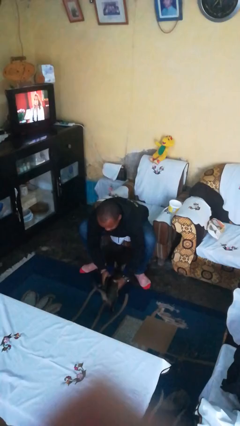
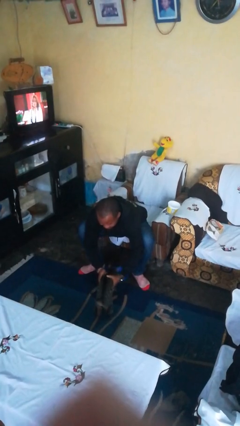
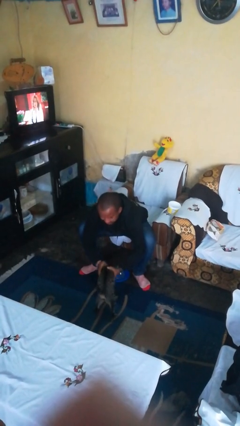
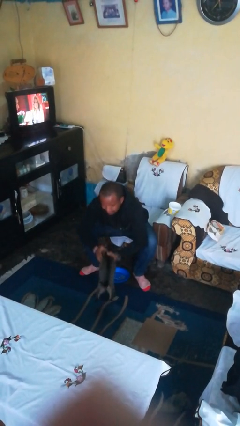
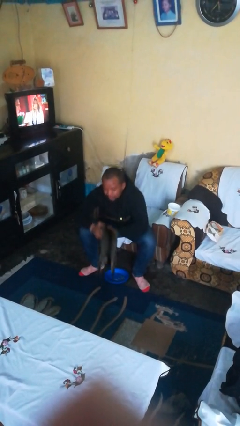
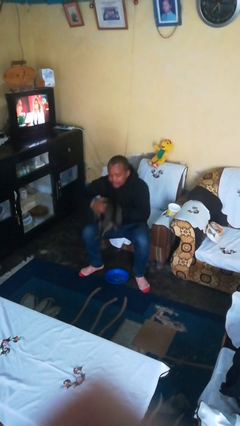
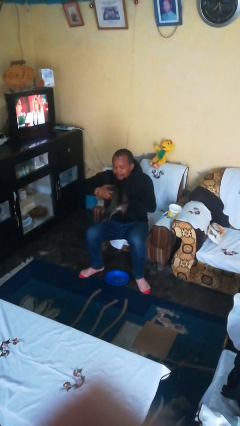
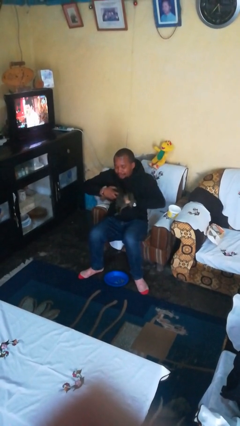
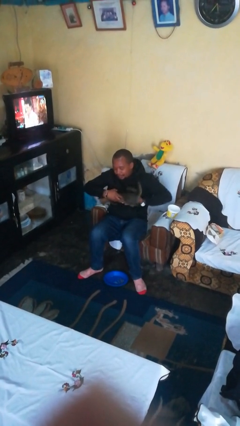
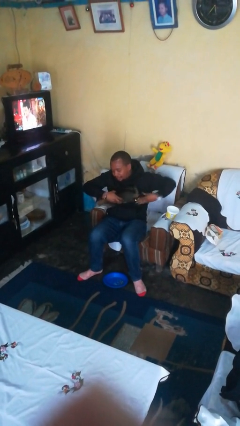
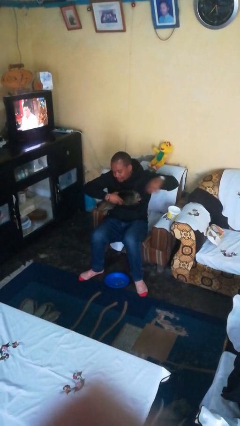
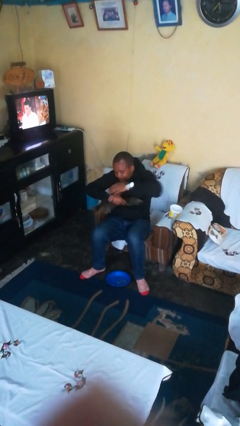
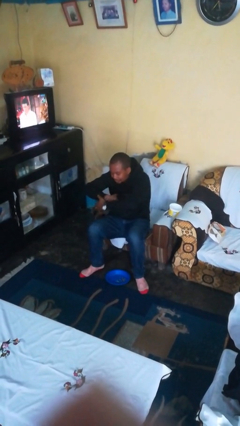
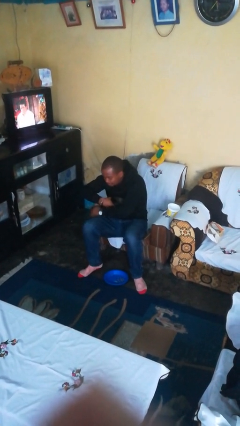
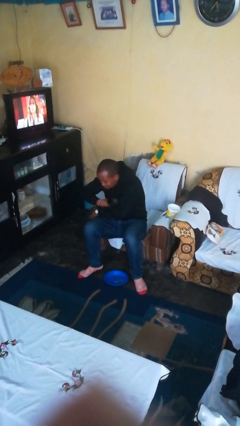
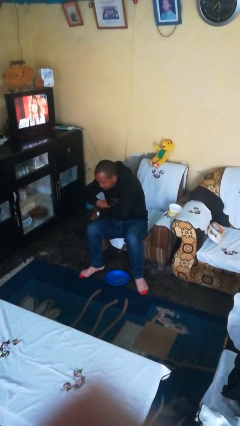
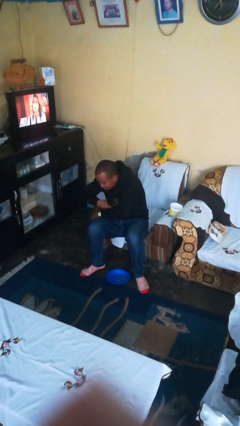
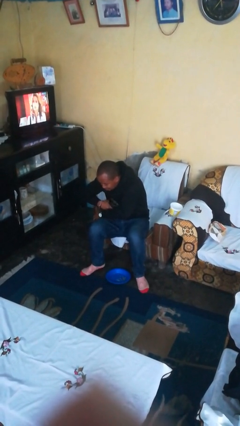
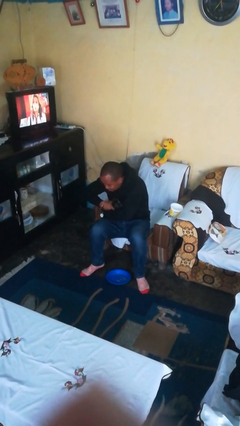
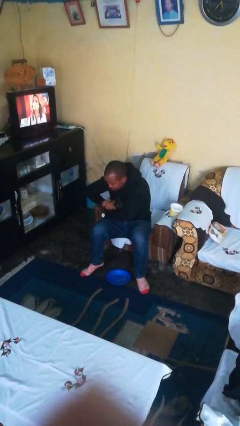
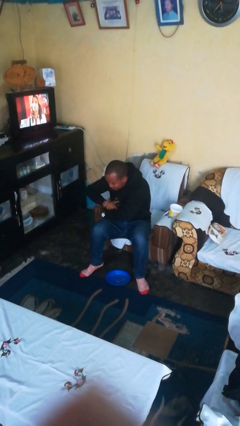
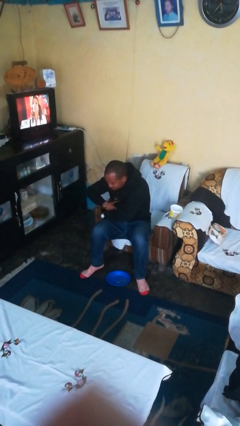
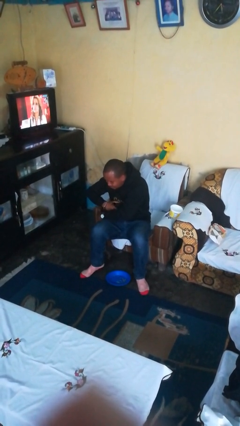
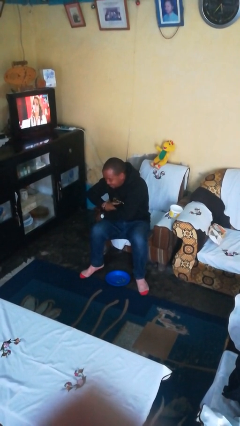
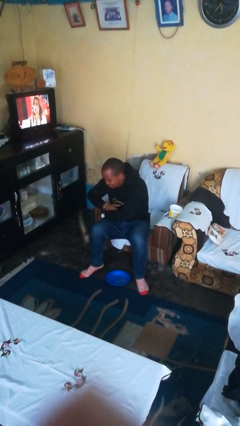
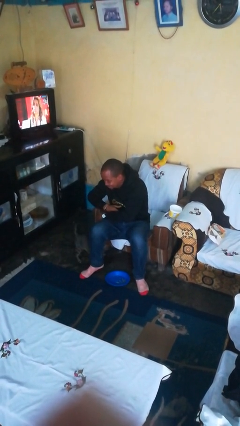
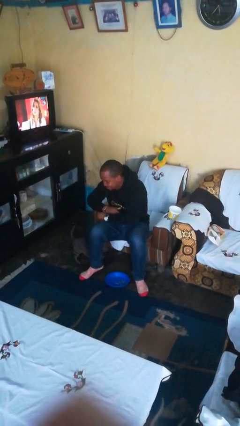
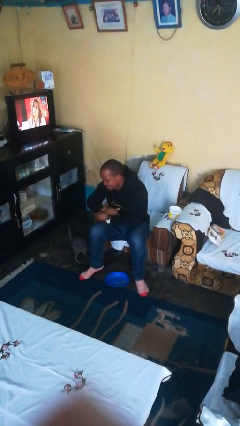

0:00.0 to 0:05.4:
person hugs cat

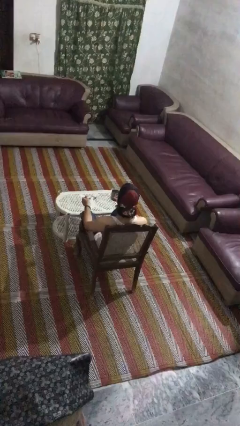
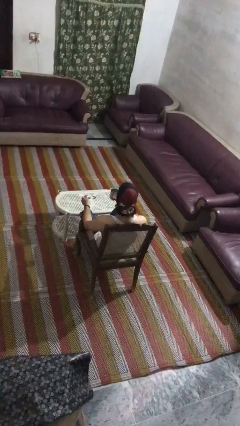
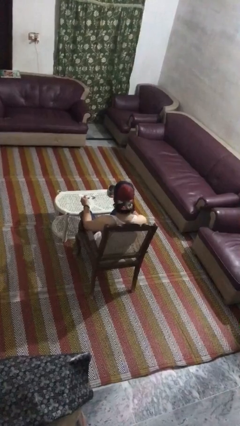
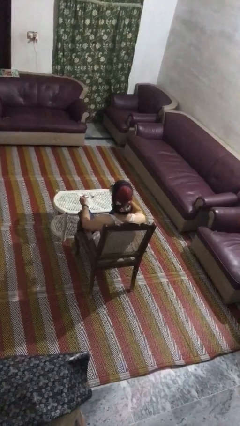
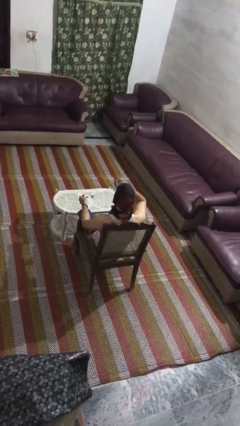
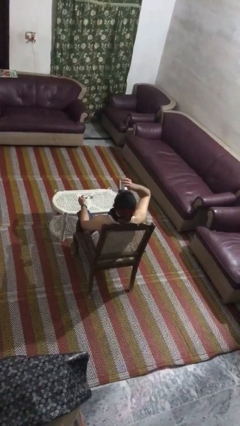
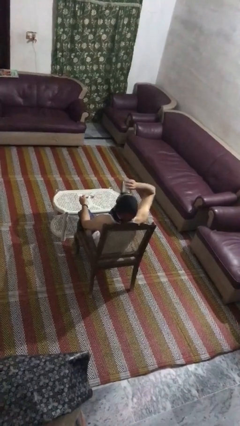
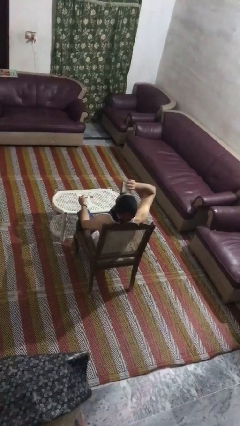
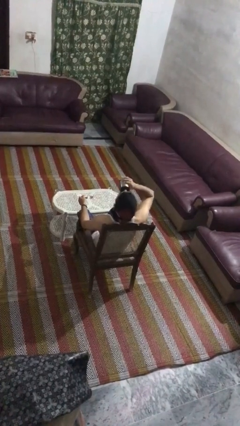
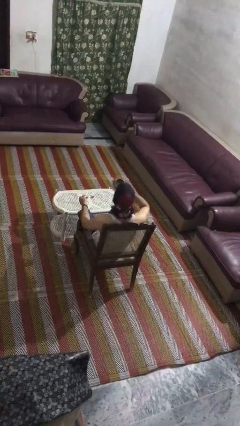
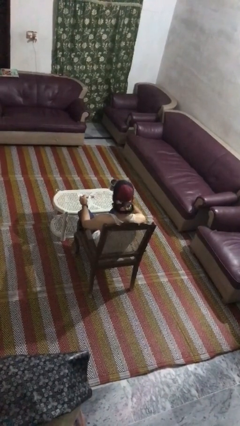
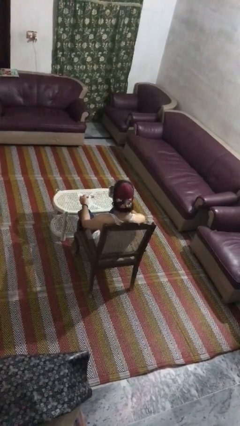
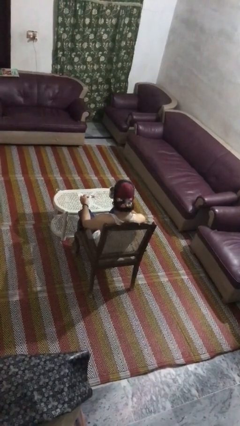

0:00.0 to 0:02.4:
person drinks from mug

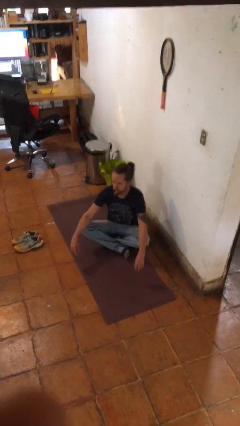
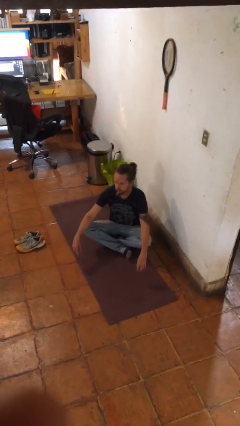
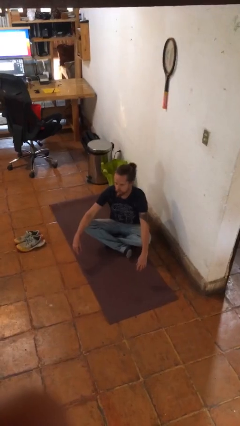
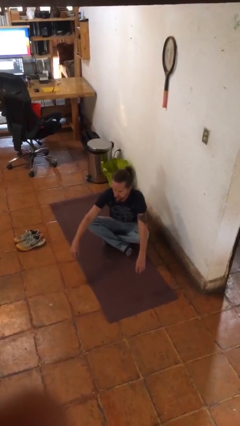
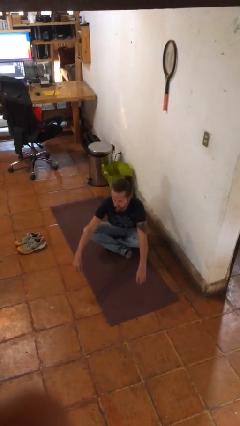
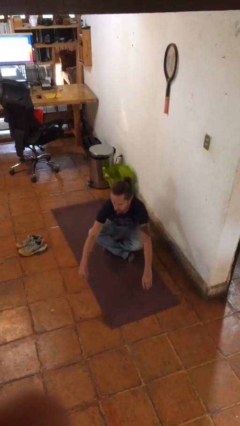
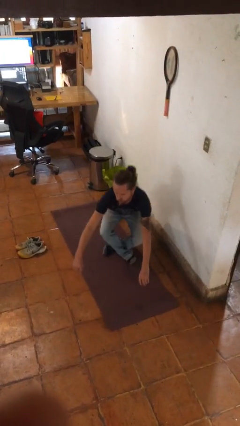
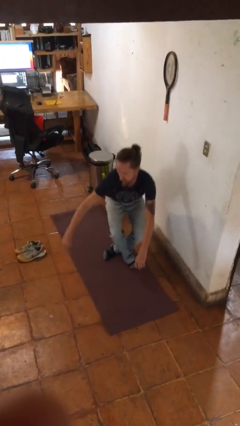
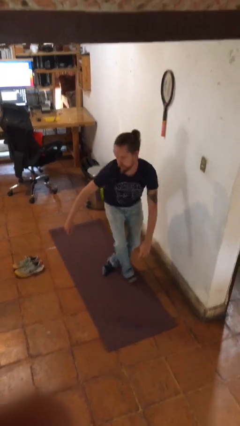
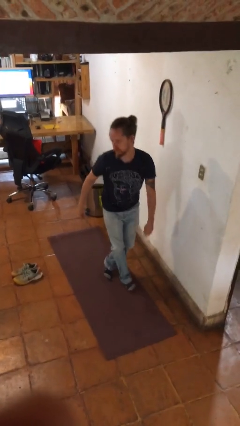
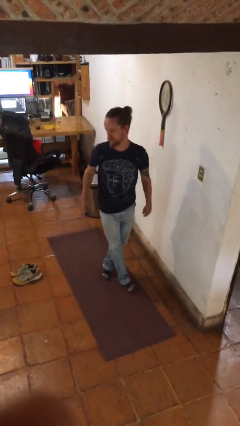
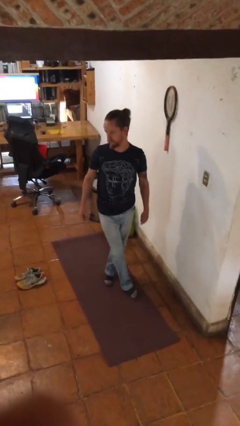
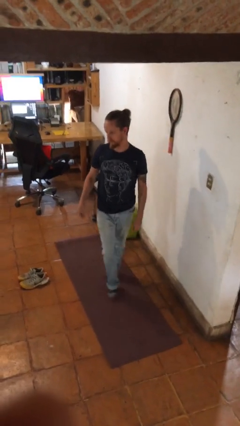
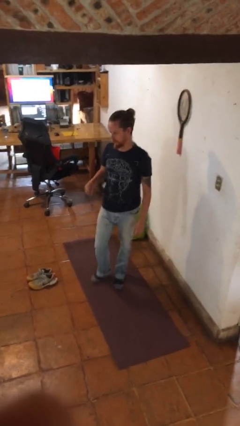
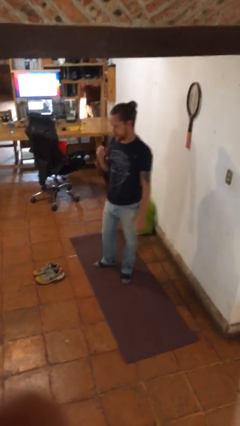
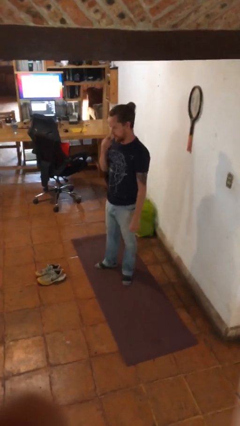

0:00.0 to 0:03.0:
person stands up from floor

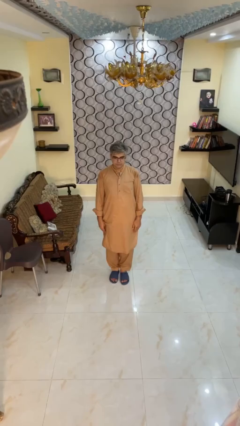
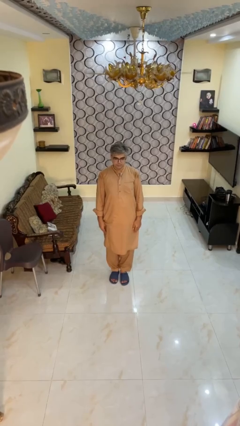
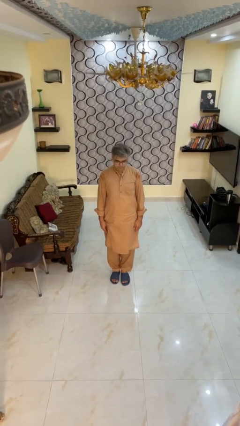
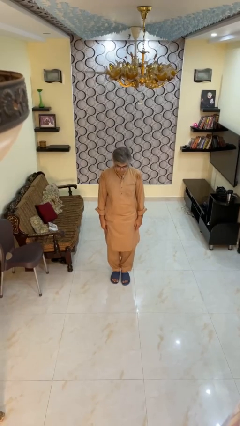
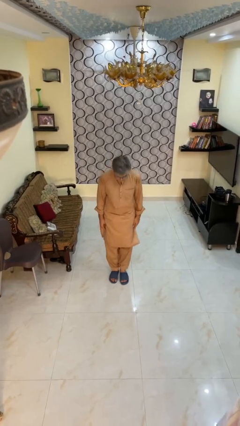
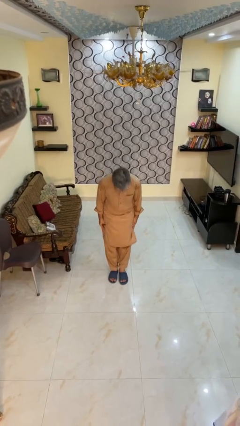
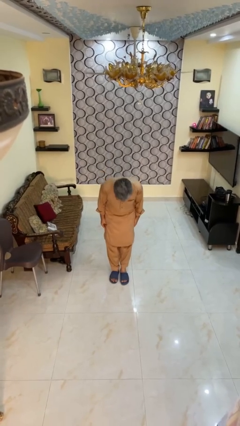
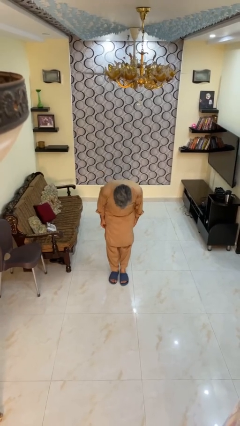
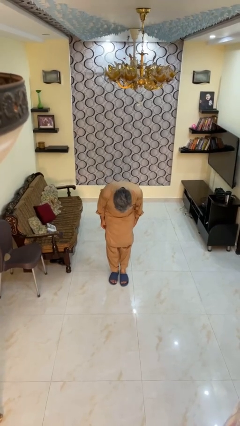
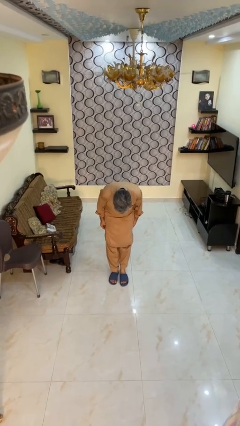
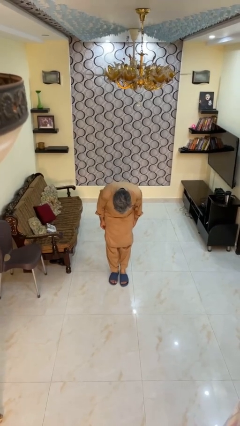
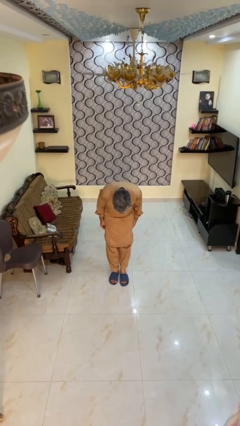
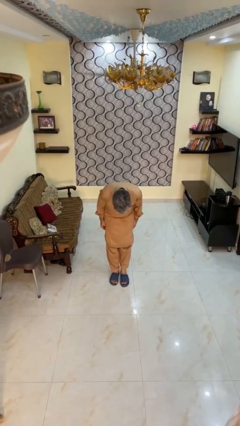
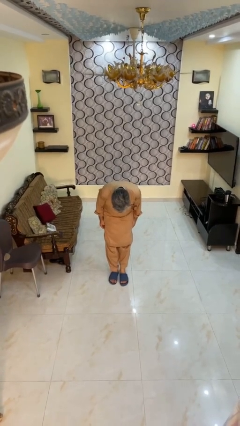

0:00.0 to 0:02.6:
person bows

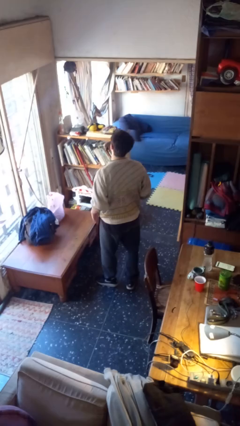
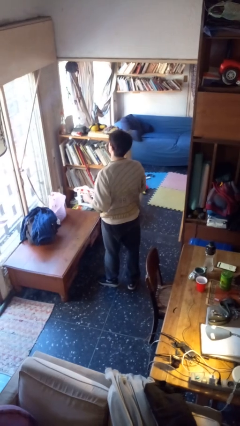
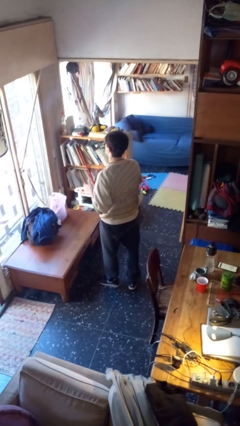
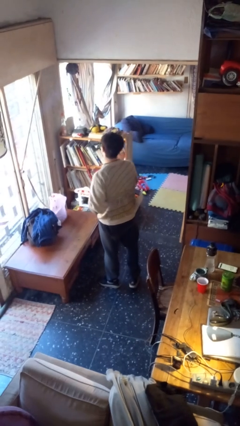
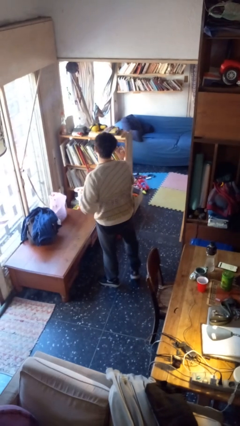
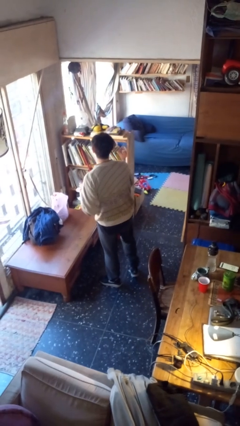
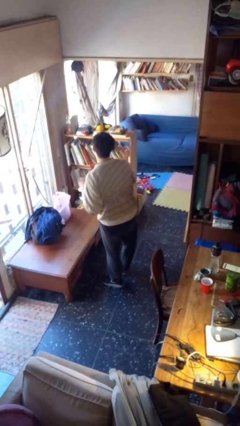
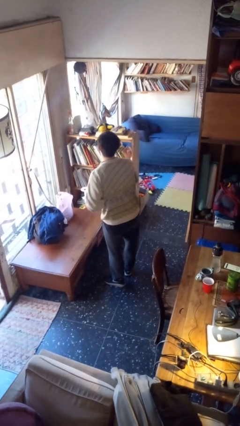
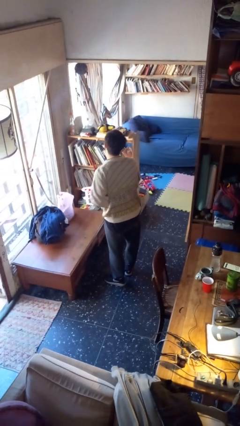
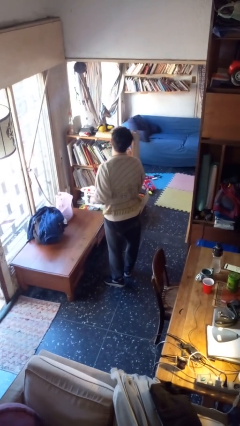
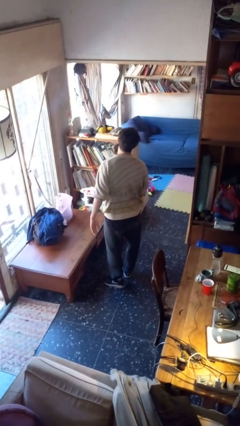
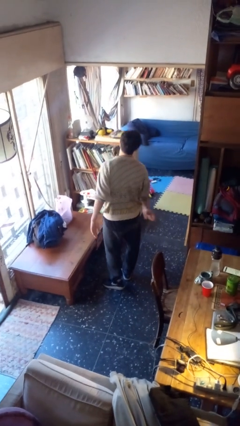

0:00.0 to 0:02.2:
person drums on chest

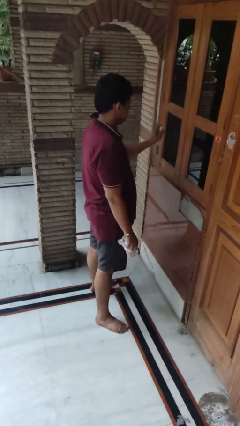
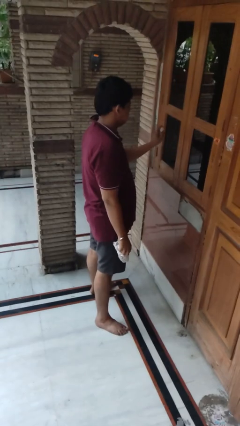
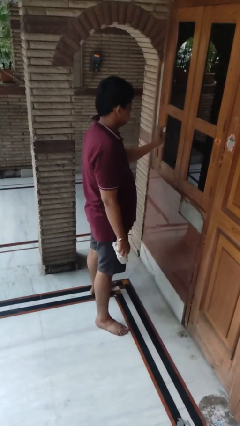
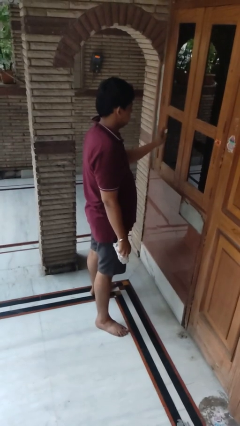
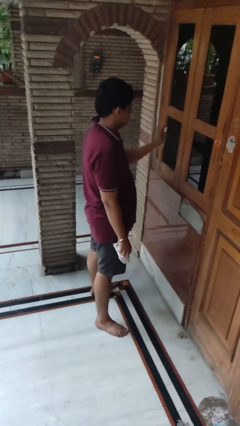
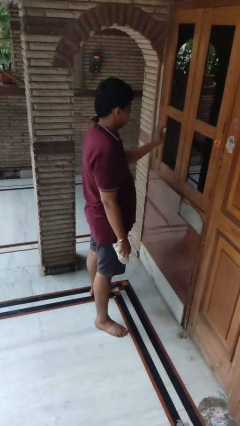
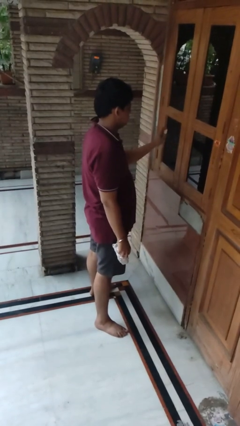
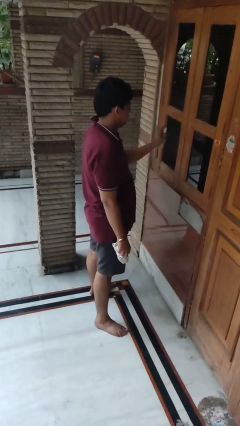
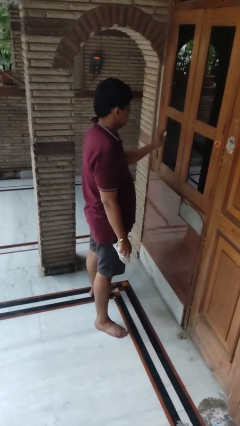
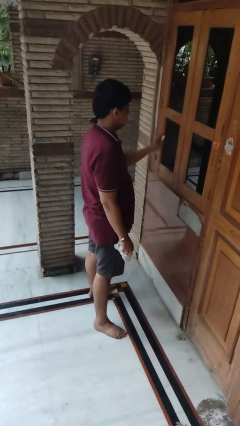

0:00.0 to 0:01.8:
person sprays from bottle
